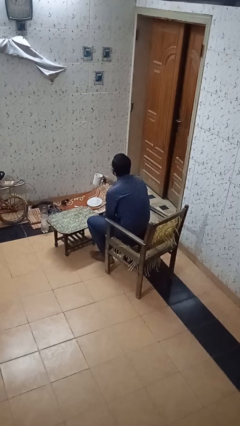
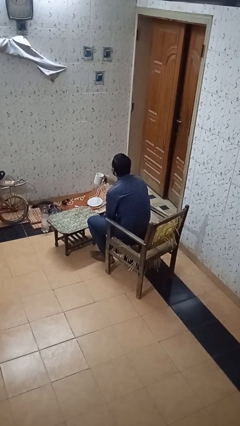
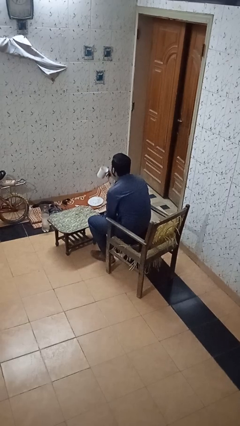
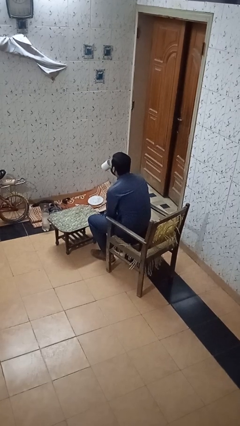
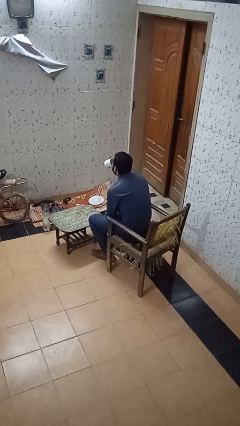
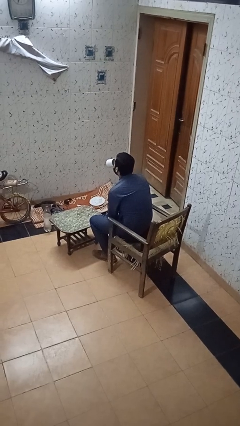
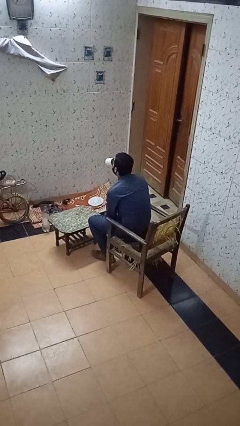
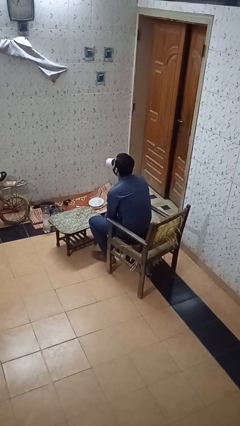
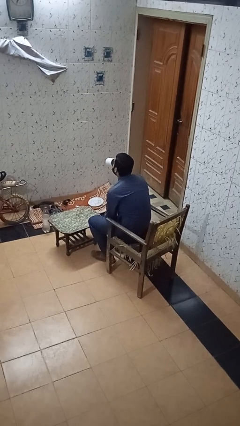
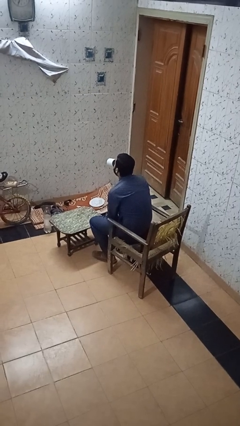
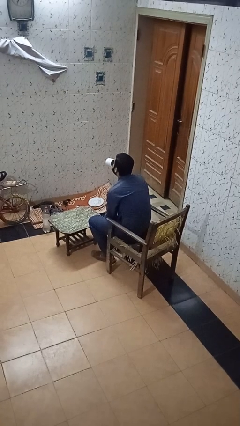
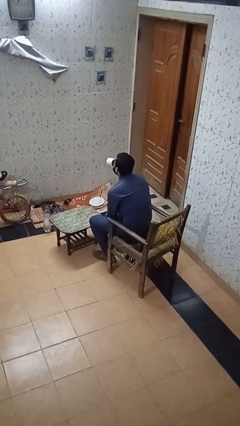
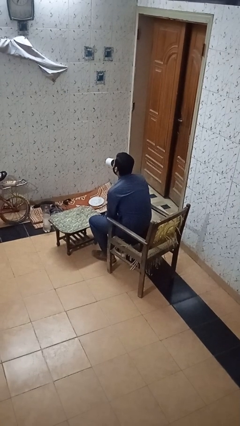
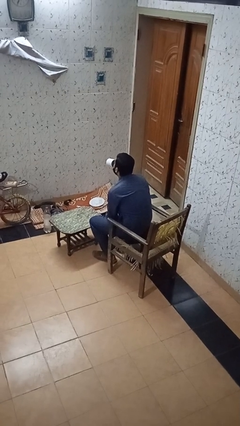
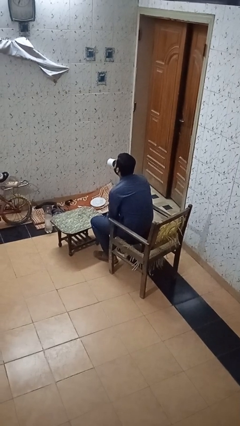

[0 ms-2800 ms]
person drinks from mug

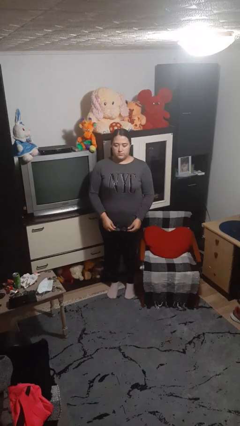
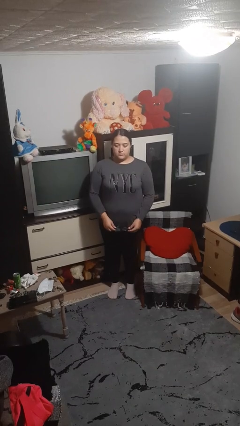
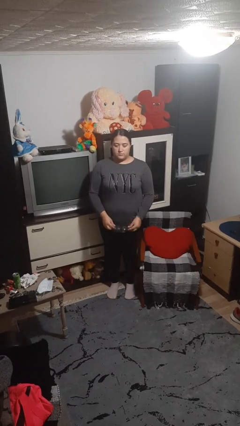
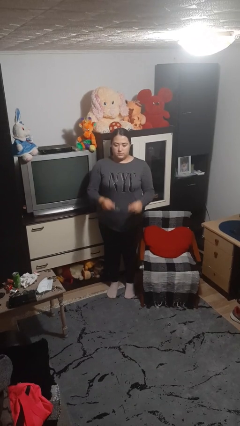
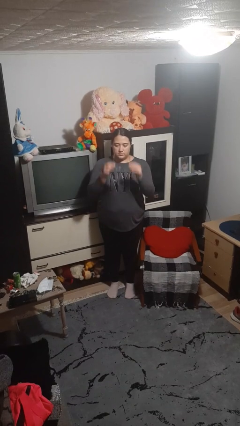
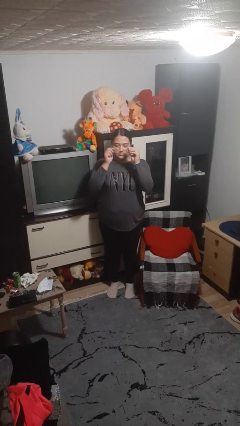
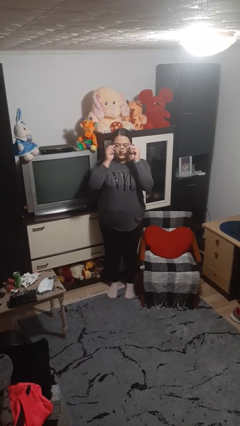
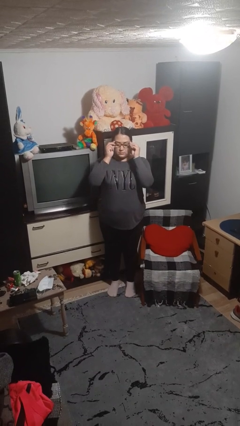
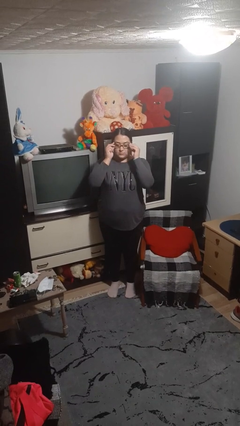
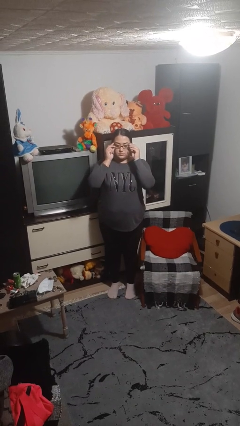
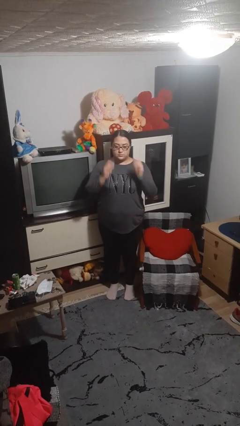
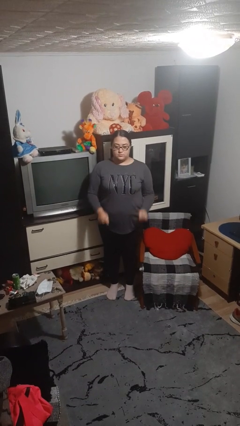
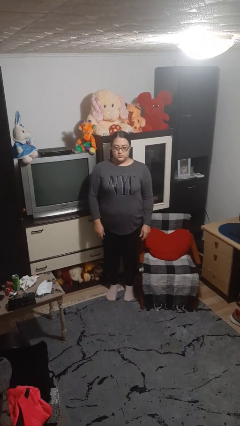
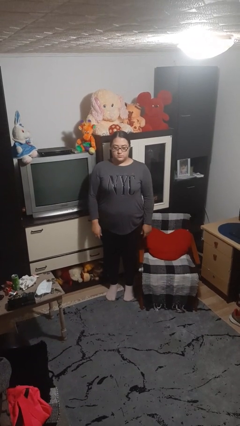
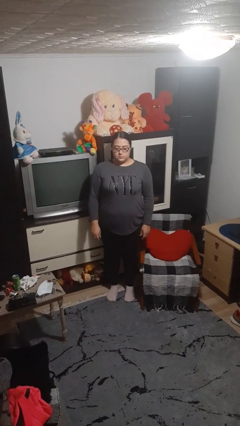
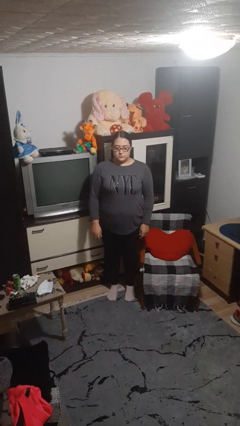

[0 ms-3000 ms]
person puts on glasses

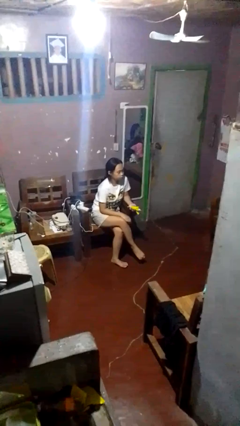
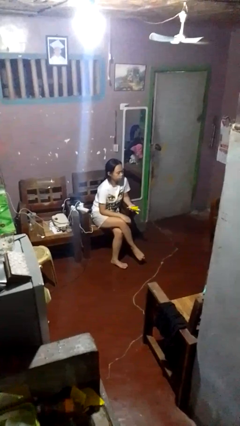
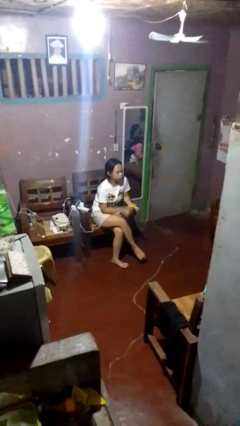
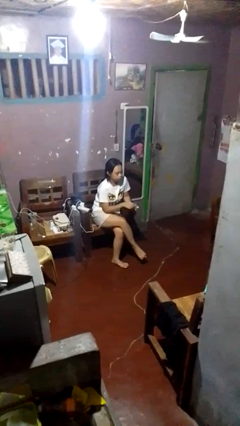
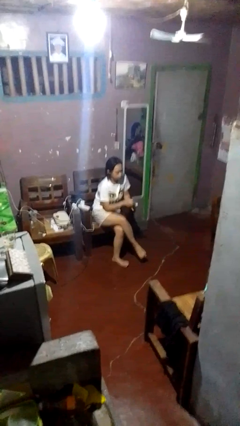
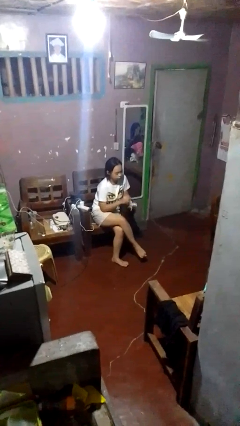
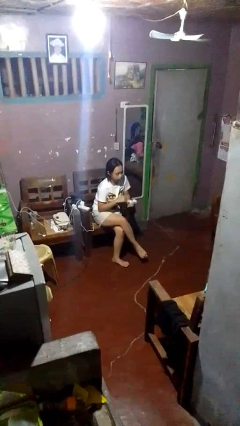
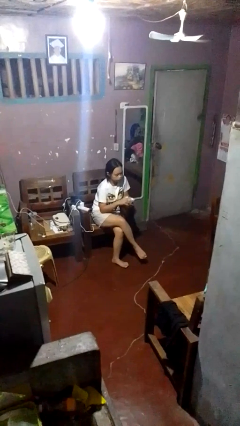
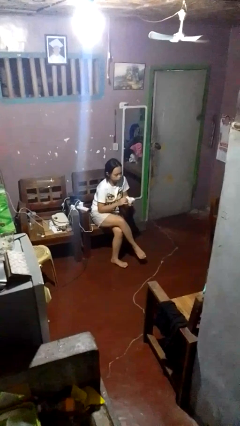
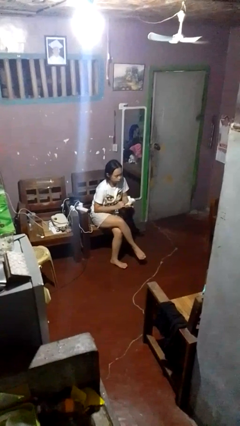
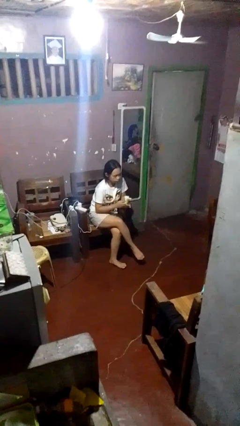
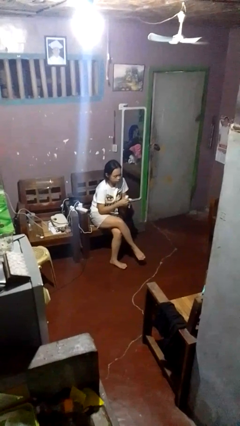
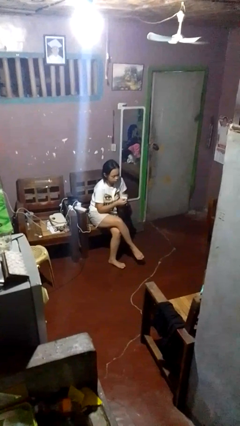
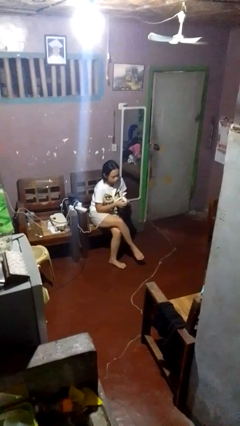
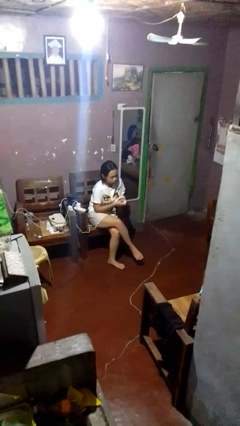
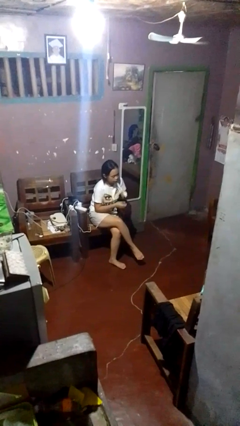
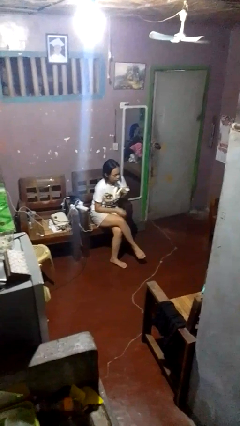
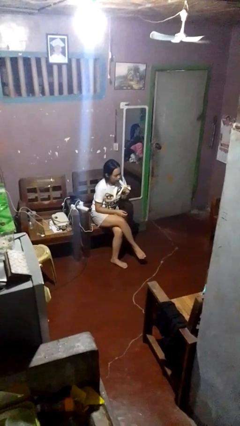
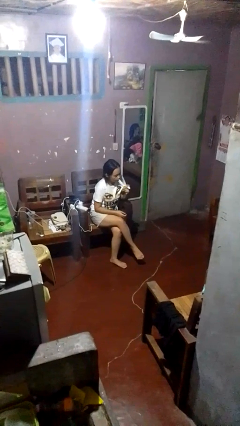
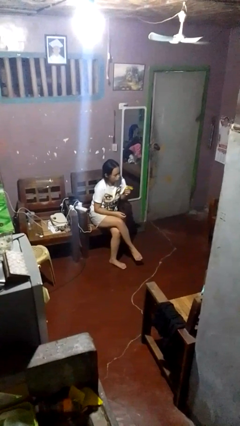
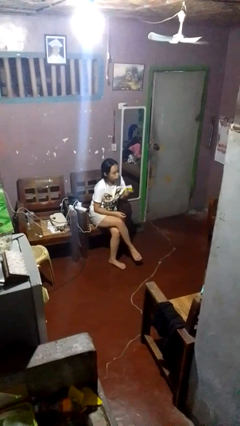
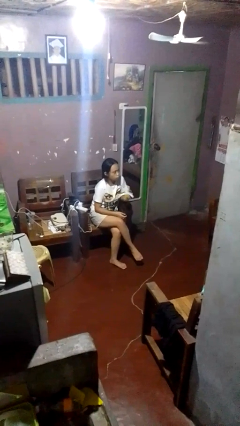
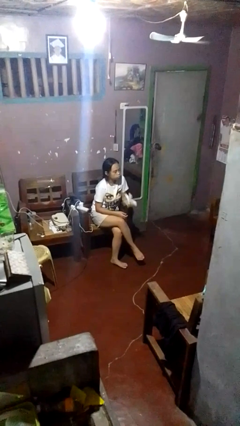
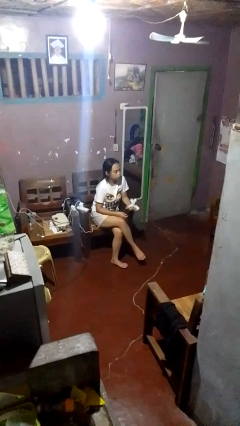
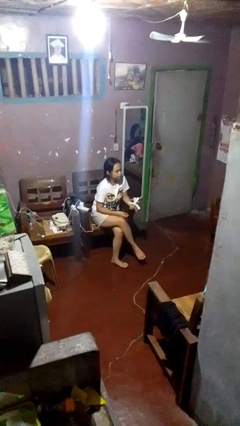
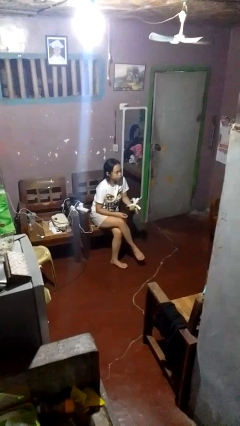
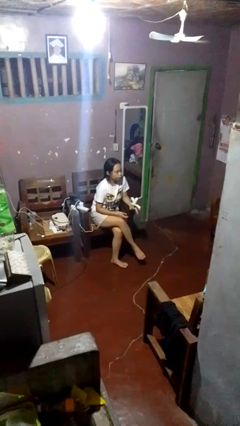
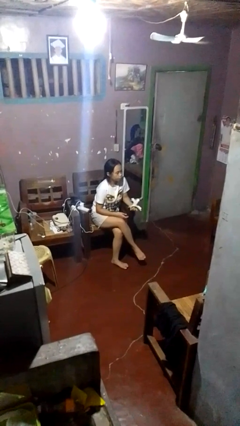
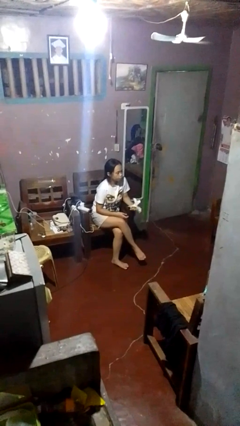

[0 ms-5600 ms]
person eats banana

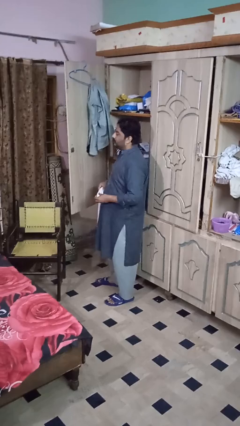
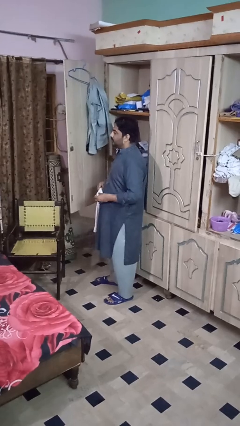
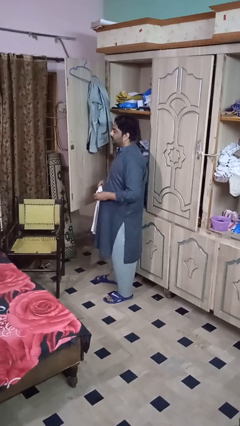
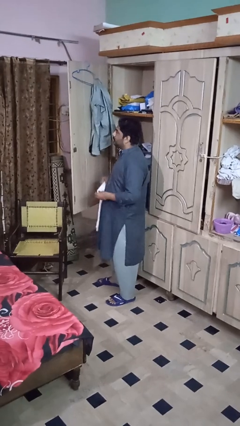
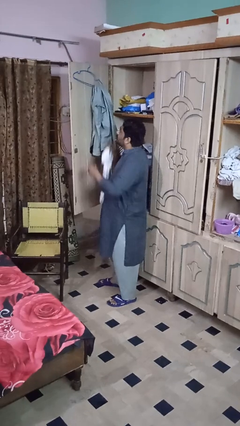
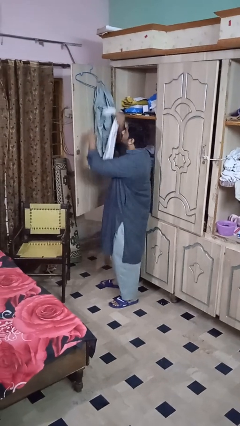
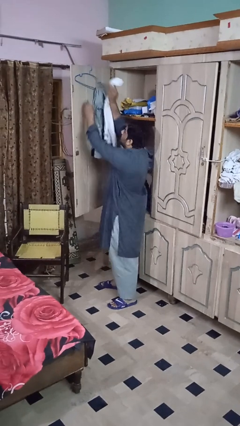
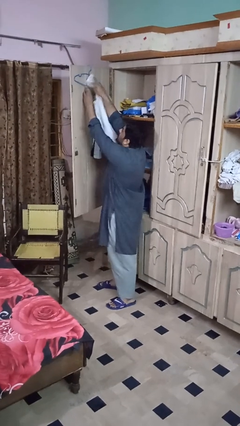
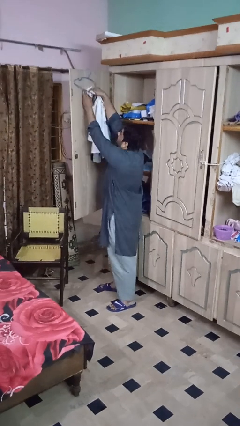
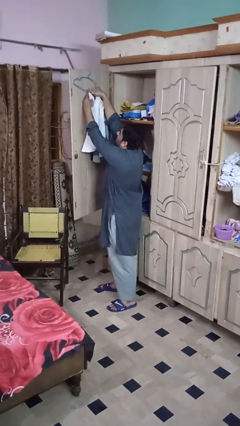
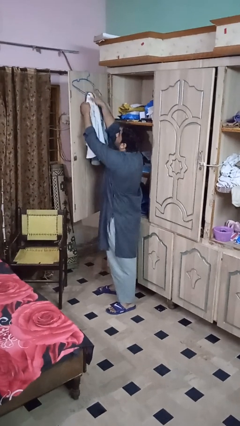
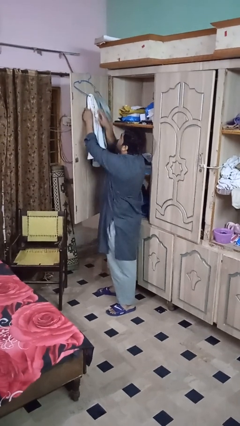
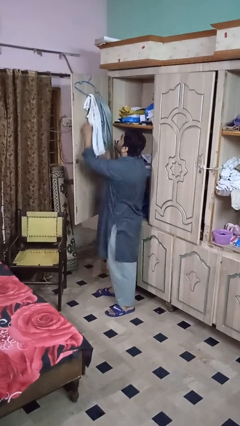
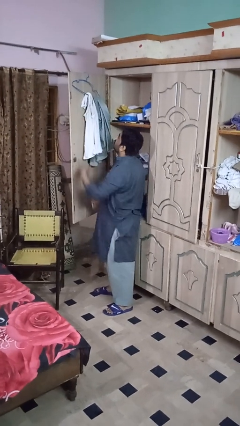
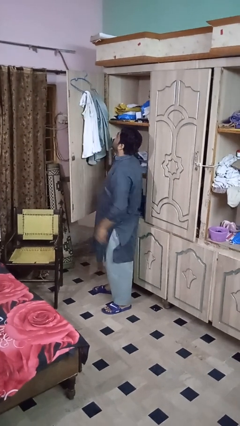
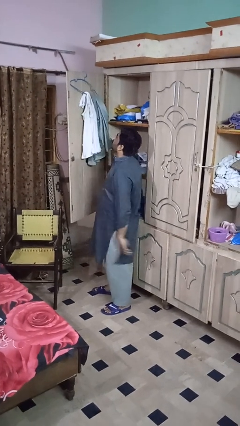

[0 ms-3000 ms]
person puts clothes into closet

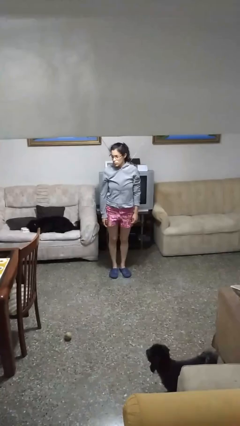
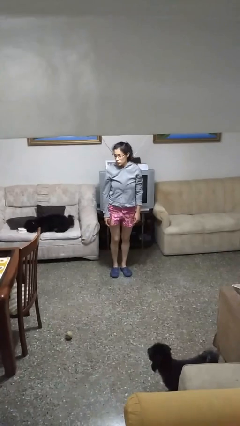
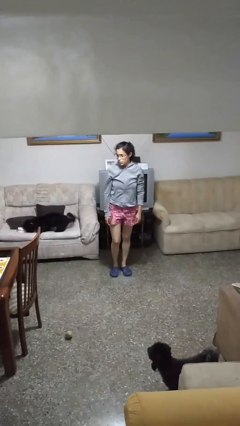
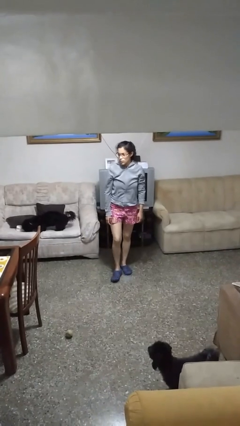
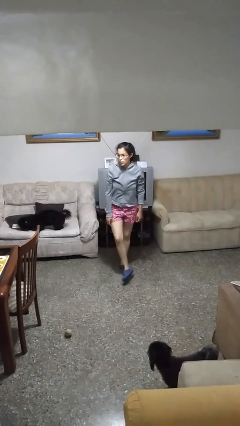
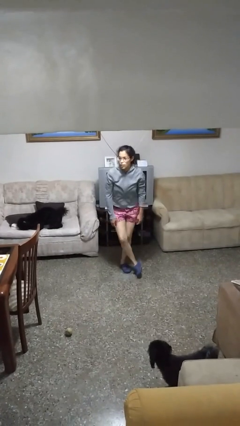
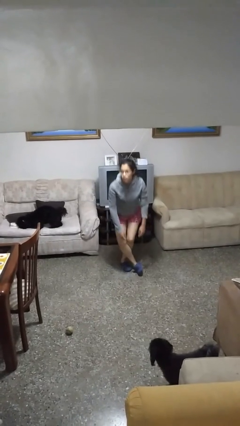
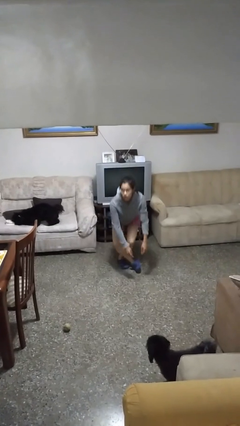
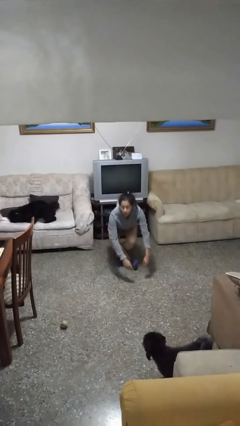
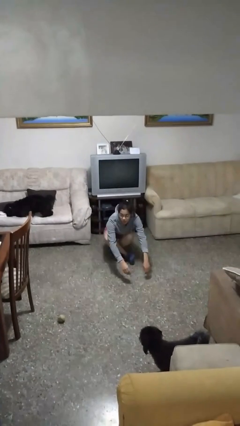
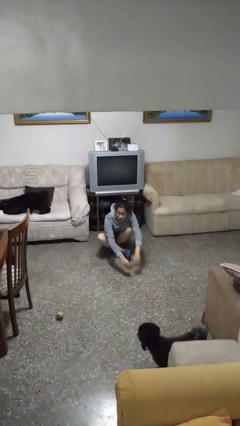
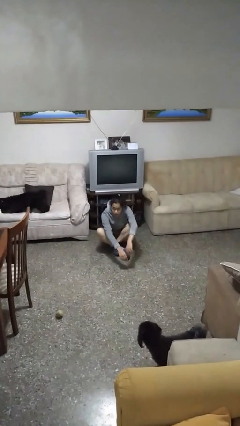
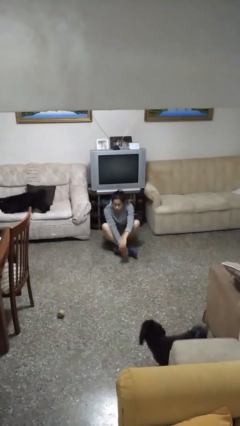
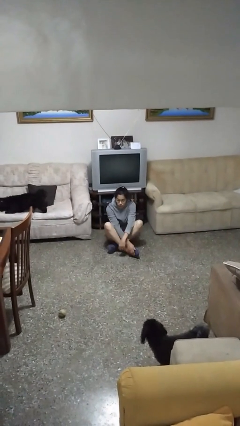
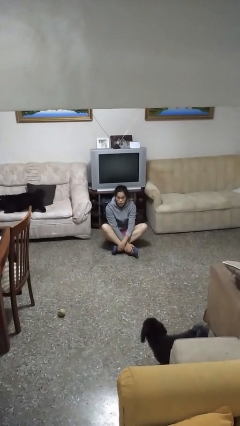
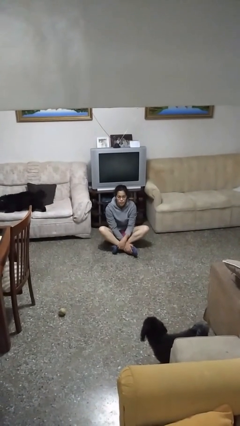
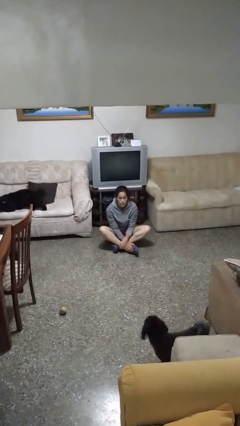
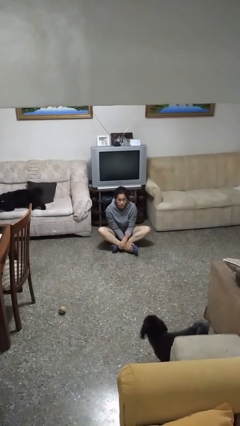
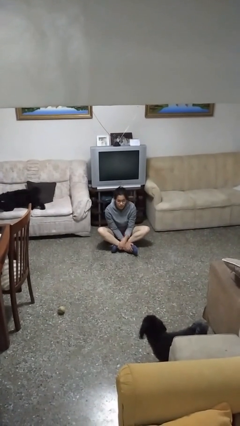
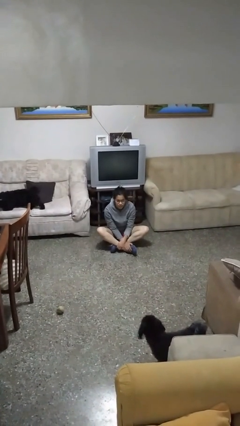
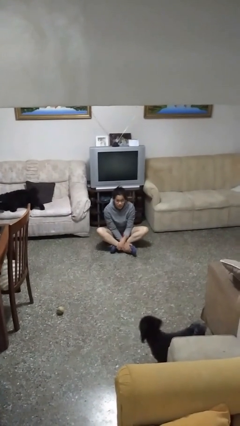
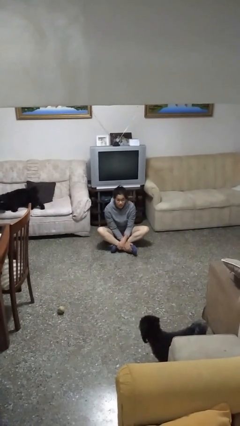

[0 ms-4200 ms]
person sits crisscross
